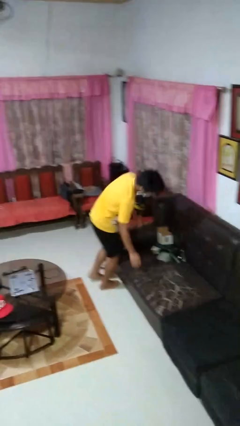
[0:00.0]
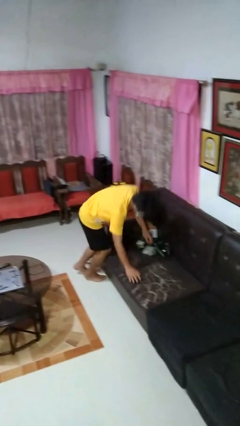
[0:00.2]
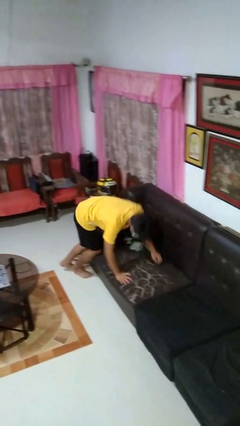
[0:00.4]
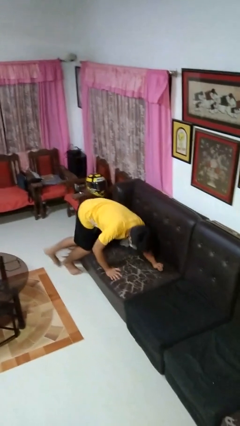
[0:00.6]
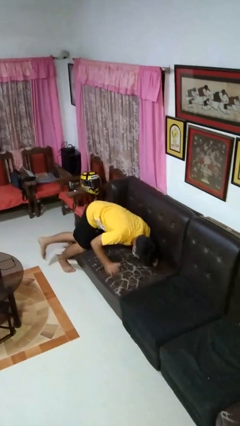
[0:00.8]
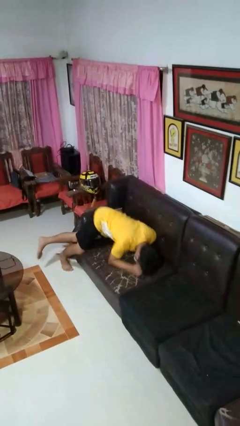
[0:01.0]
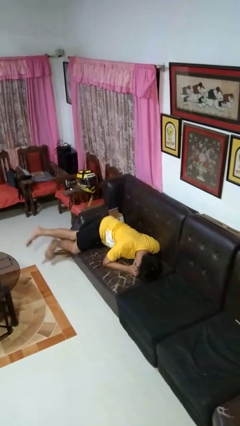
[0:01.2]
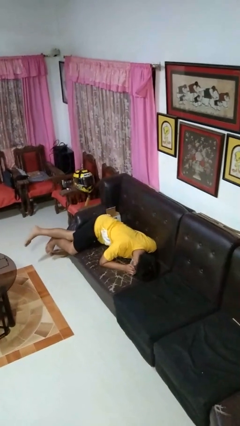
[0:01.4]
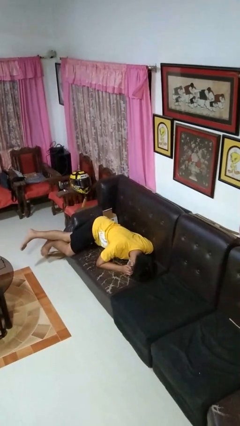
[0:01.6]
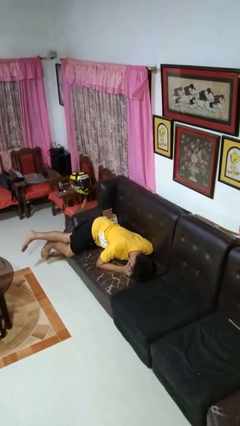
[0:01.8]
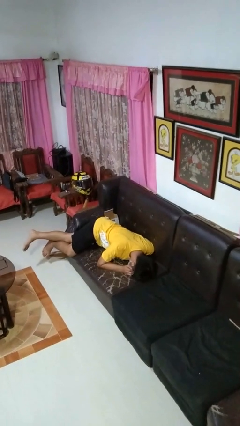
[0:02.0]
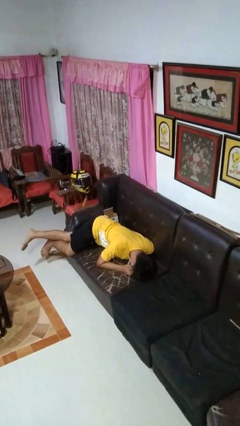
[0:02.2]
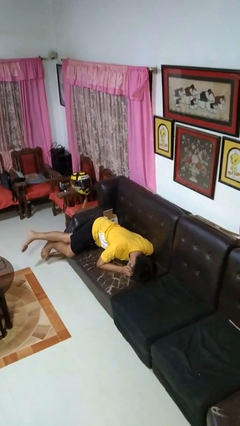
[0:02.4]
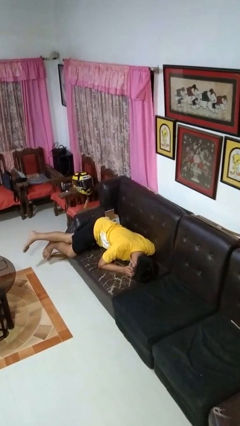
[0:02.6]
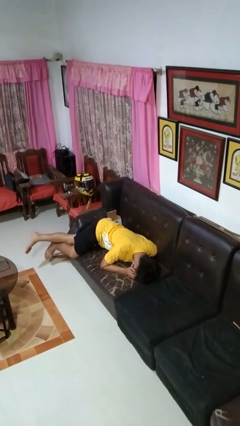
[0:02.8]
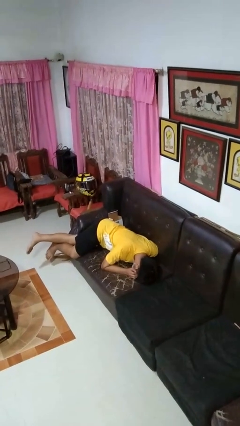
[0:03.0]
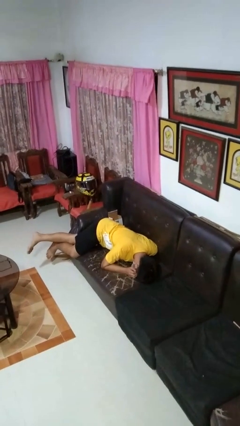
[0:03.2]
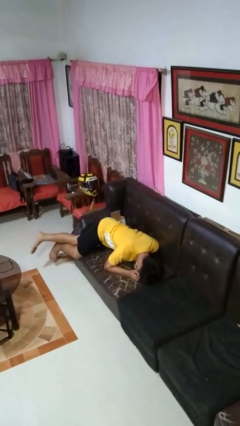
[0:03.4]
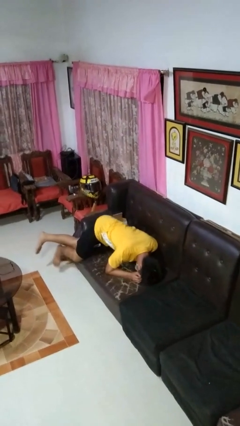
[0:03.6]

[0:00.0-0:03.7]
person lies down on couch

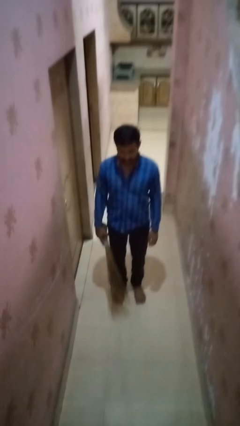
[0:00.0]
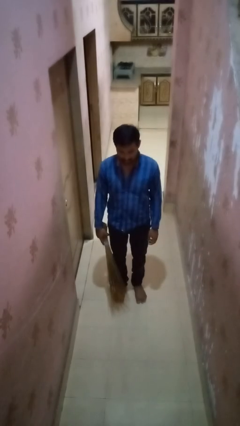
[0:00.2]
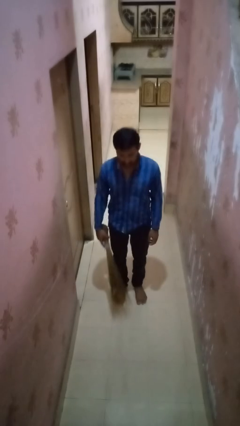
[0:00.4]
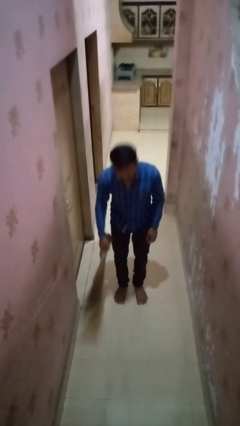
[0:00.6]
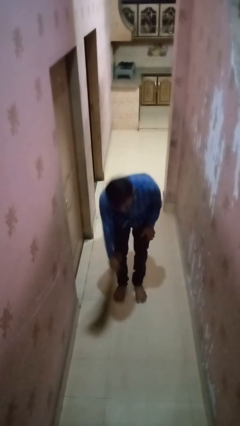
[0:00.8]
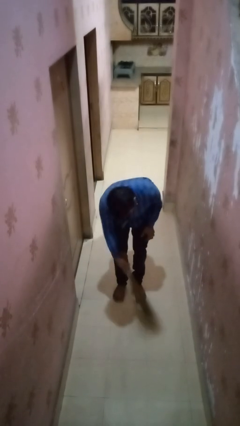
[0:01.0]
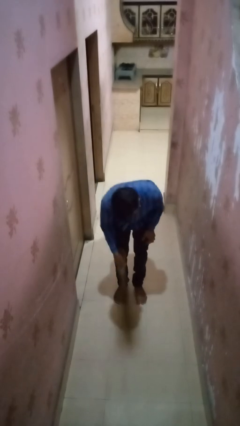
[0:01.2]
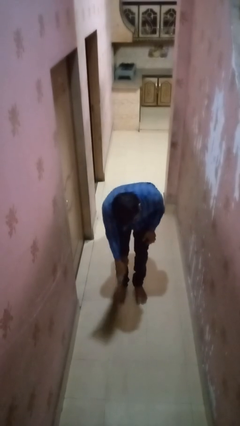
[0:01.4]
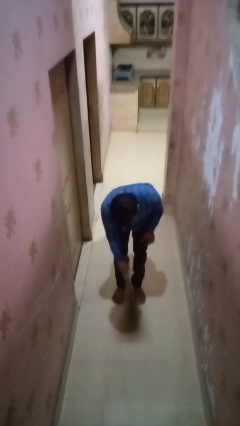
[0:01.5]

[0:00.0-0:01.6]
person sweeps floor

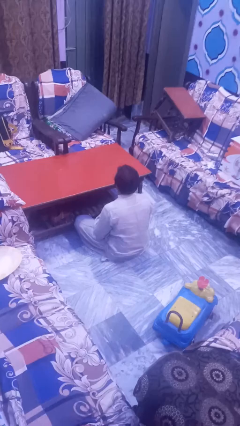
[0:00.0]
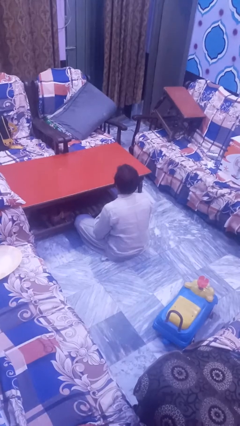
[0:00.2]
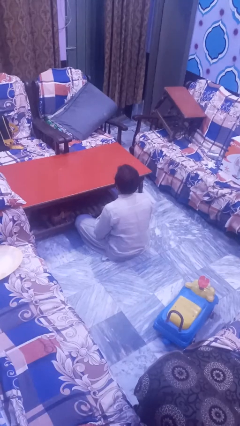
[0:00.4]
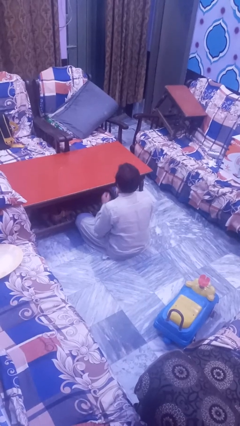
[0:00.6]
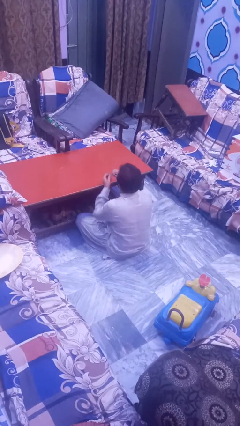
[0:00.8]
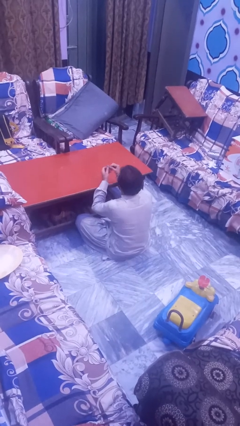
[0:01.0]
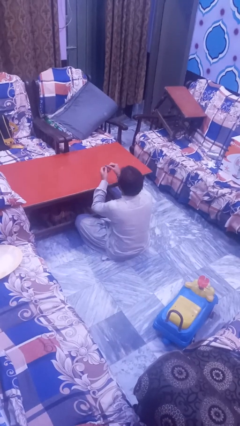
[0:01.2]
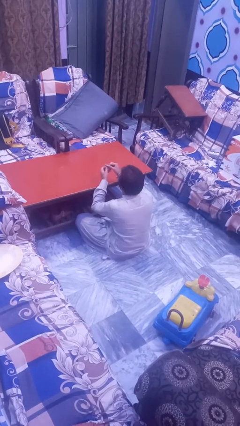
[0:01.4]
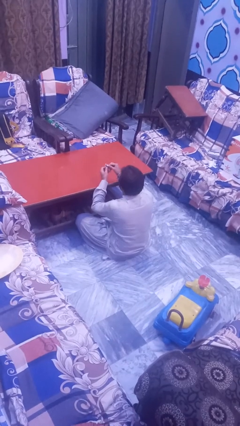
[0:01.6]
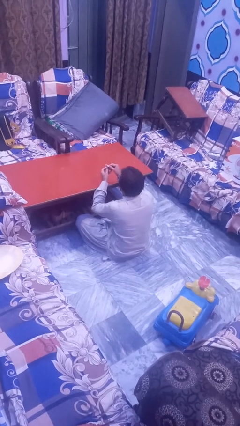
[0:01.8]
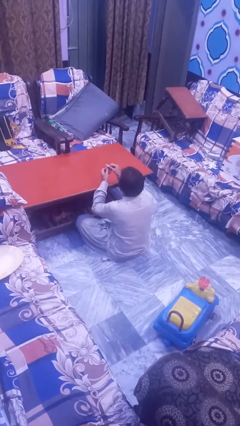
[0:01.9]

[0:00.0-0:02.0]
person files fingernails

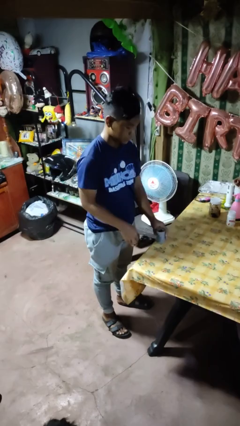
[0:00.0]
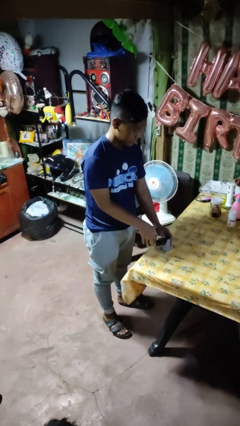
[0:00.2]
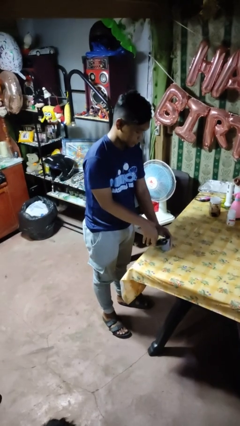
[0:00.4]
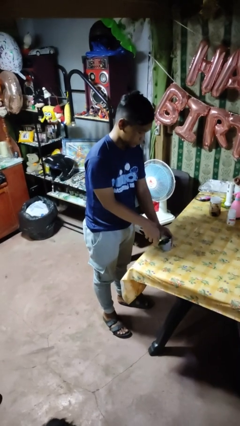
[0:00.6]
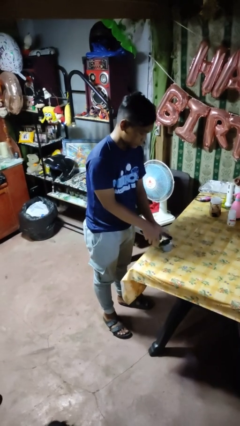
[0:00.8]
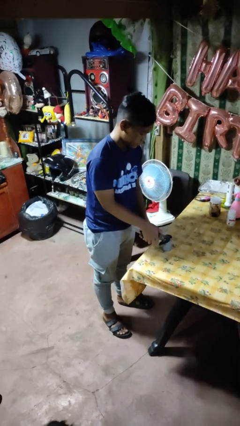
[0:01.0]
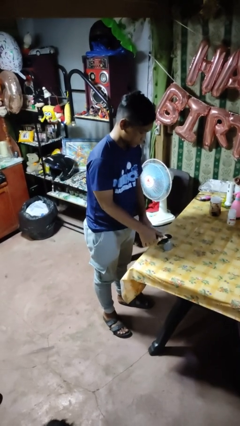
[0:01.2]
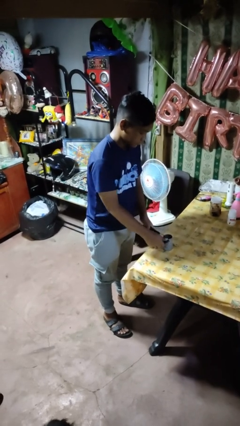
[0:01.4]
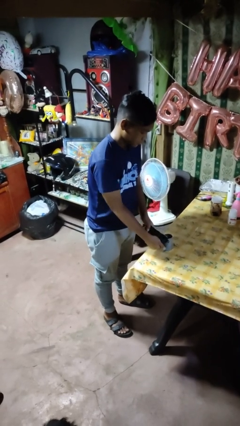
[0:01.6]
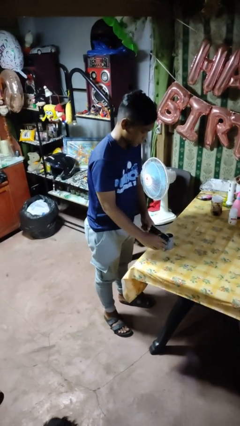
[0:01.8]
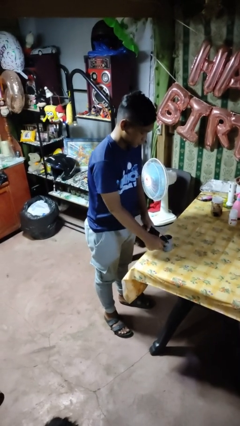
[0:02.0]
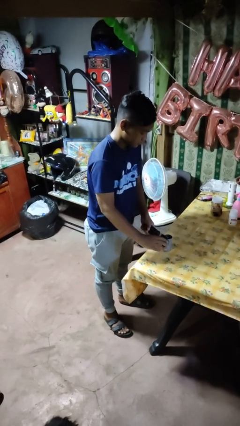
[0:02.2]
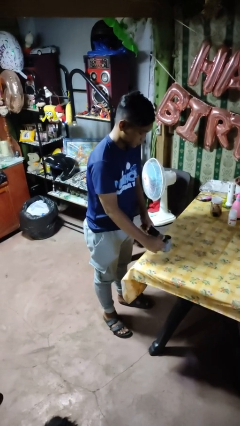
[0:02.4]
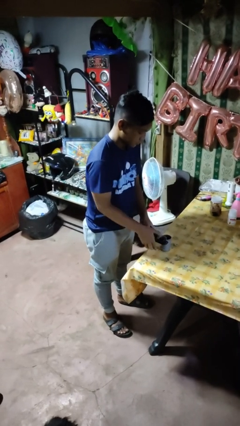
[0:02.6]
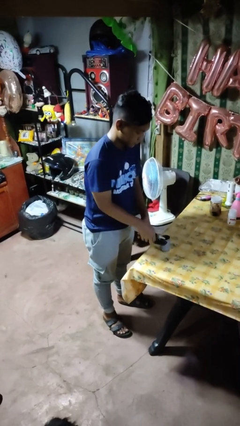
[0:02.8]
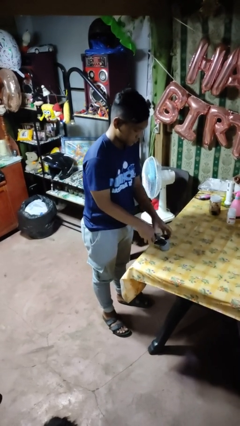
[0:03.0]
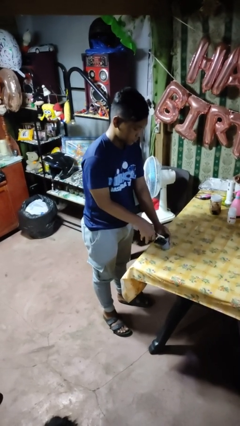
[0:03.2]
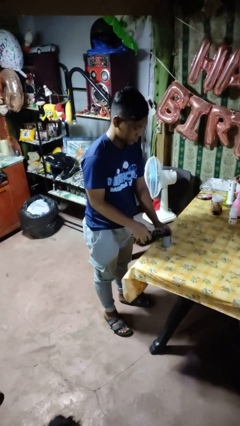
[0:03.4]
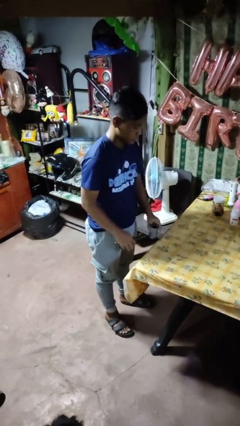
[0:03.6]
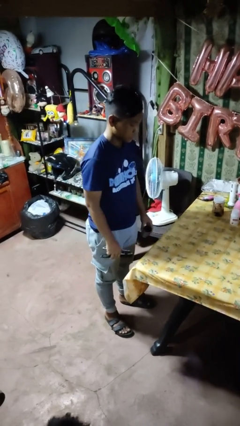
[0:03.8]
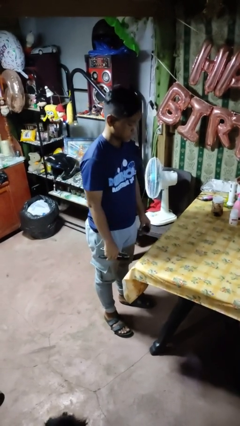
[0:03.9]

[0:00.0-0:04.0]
person opens can with can opener

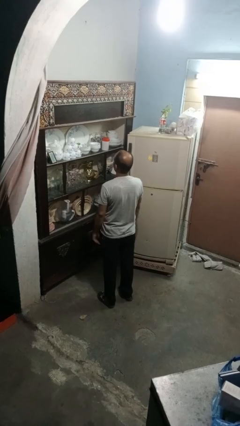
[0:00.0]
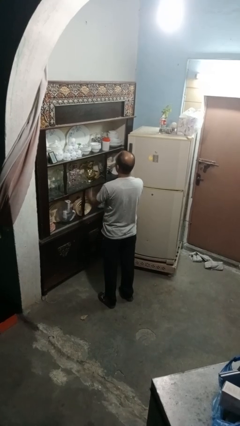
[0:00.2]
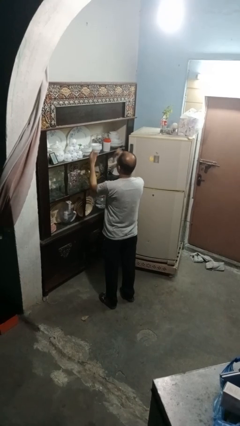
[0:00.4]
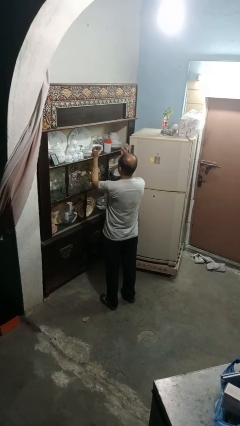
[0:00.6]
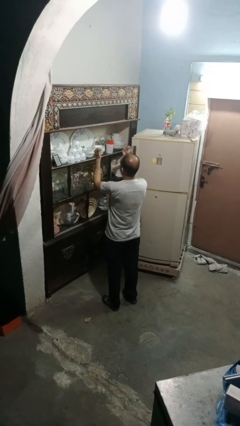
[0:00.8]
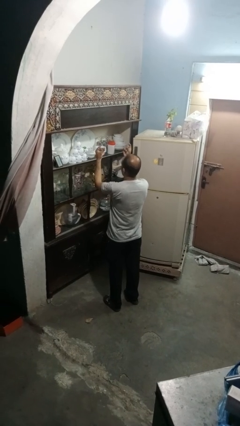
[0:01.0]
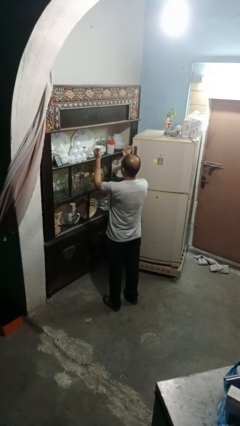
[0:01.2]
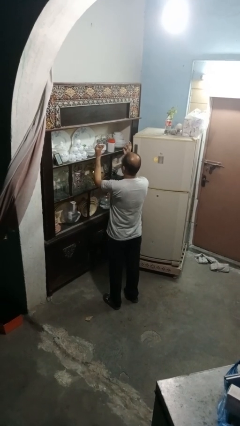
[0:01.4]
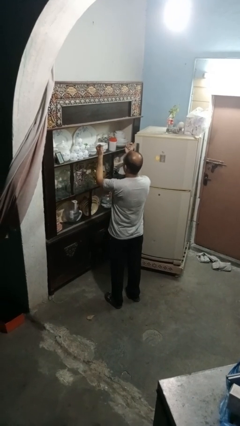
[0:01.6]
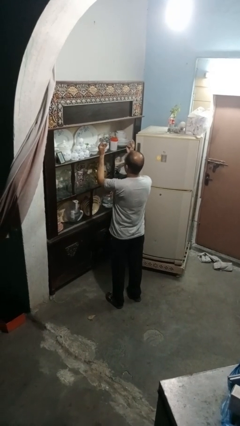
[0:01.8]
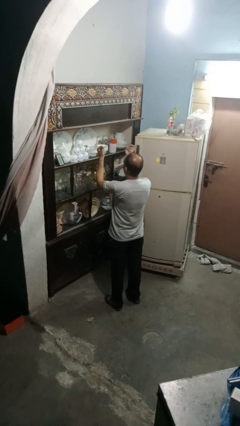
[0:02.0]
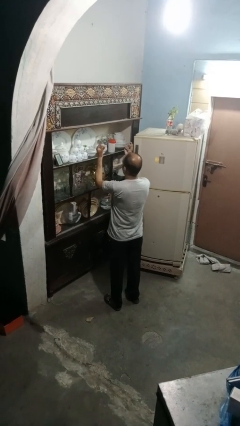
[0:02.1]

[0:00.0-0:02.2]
person snaps fingers

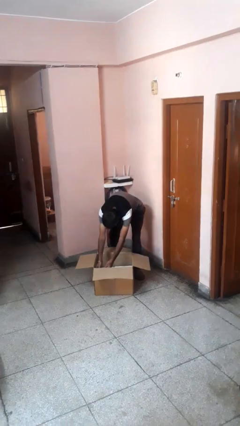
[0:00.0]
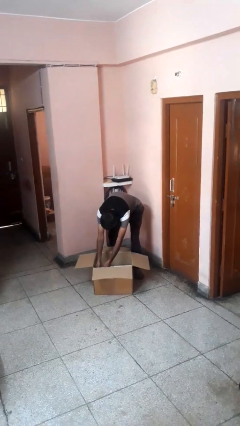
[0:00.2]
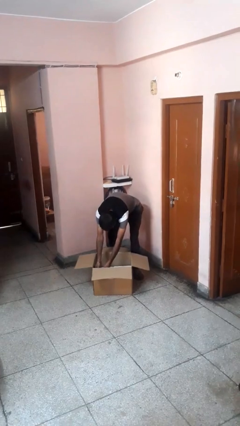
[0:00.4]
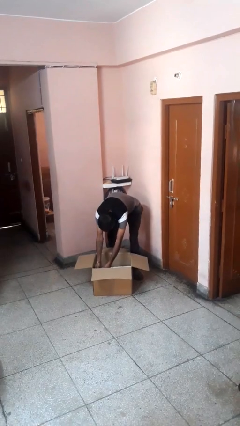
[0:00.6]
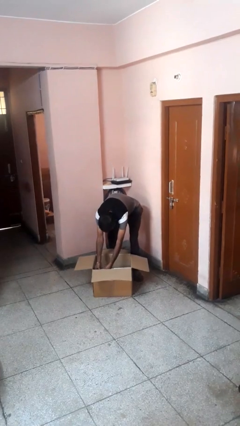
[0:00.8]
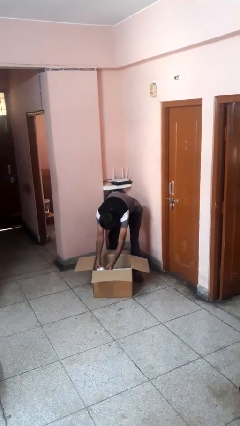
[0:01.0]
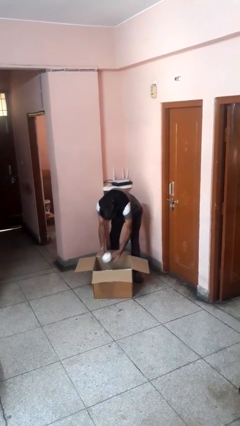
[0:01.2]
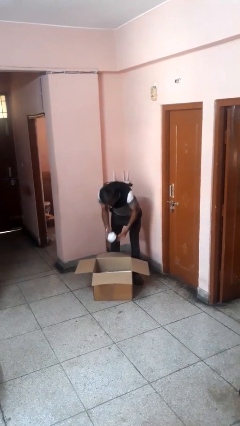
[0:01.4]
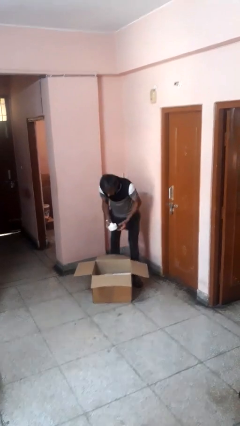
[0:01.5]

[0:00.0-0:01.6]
person takes object from box

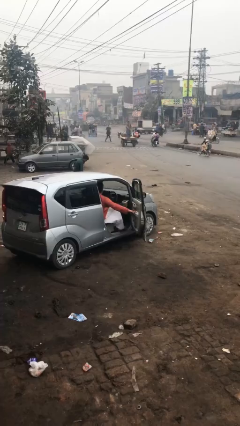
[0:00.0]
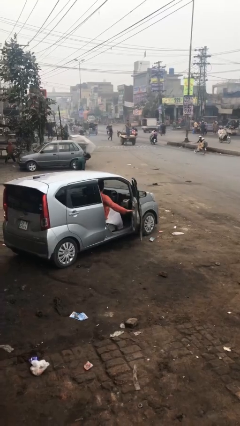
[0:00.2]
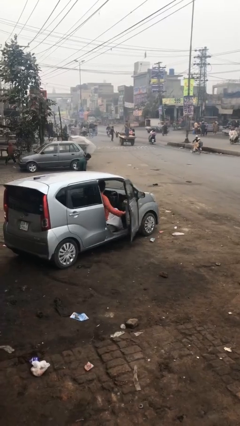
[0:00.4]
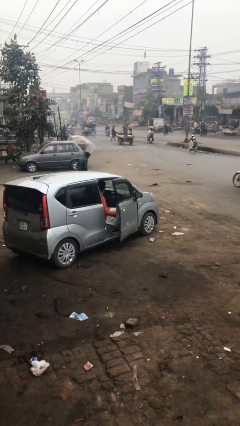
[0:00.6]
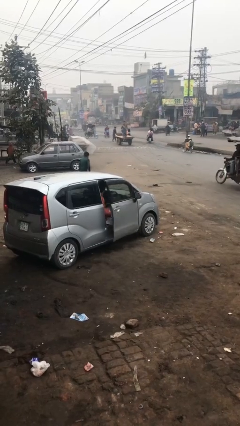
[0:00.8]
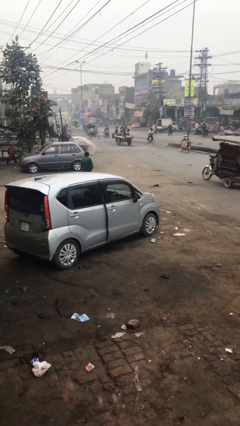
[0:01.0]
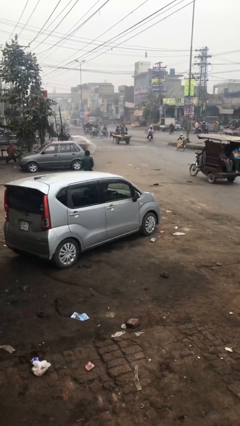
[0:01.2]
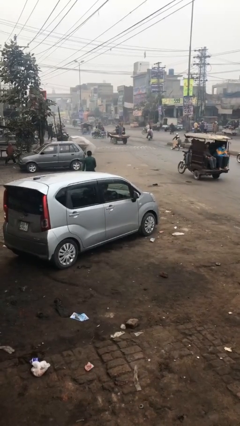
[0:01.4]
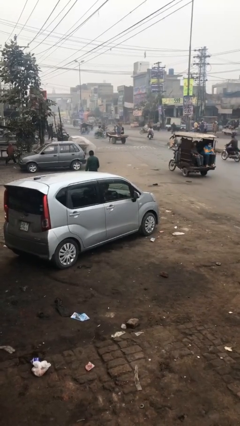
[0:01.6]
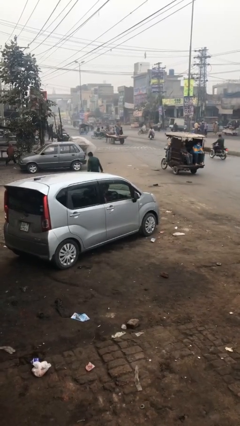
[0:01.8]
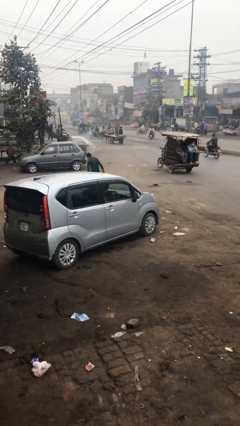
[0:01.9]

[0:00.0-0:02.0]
person closes car door
